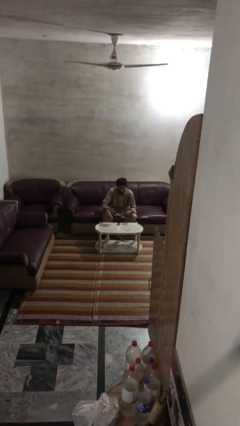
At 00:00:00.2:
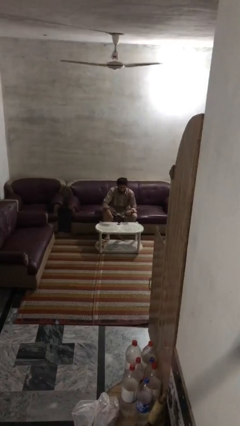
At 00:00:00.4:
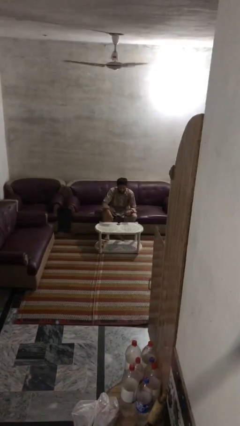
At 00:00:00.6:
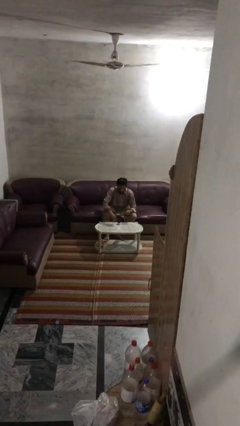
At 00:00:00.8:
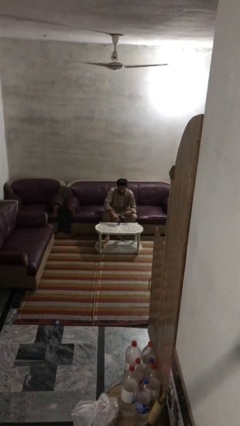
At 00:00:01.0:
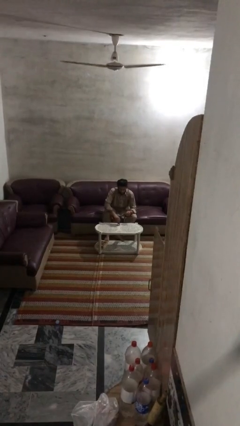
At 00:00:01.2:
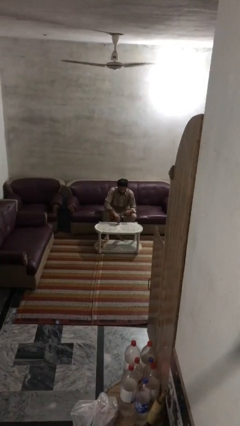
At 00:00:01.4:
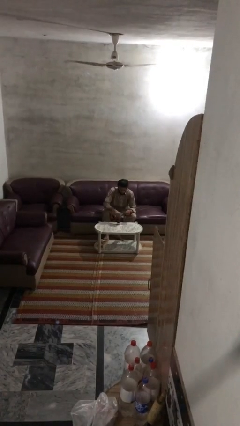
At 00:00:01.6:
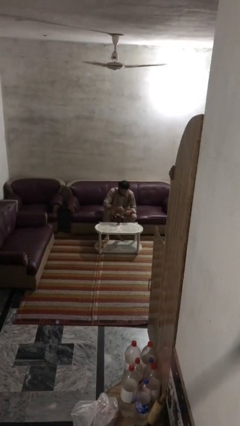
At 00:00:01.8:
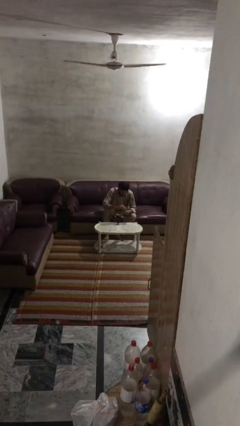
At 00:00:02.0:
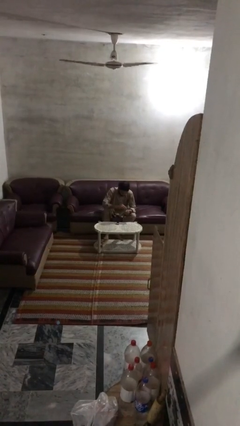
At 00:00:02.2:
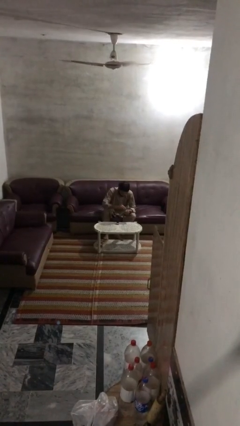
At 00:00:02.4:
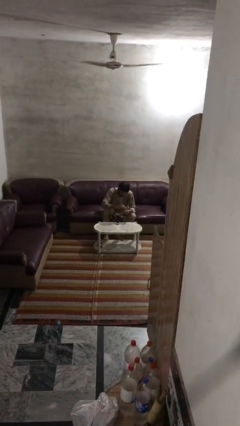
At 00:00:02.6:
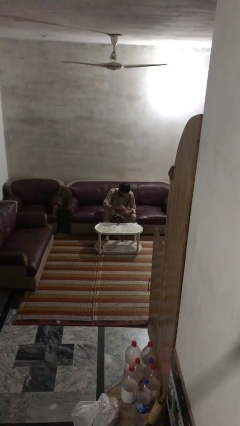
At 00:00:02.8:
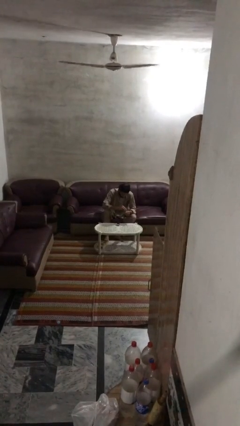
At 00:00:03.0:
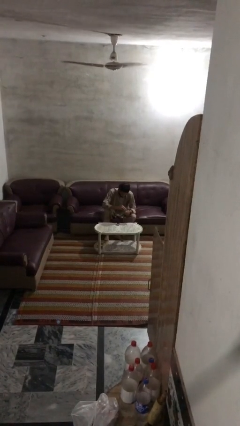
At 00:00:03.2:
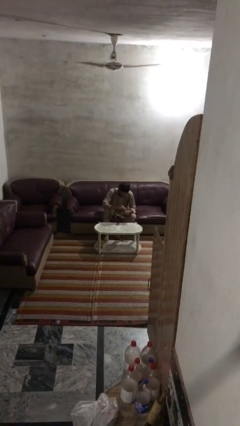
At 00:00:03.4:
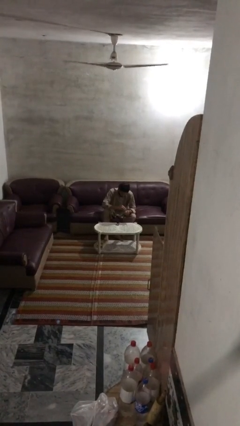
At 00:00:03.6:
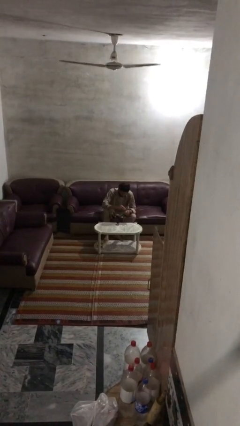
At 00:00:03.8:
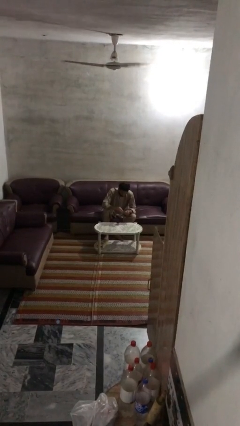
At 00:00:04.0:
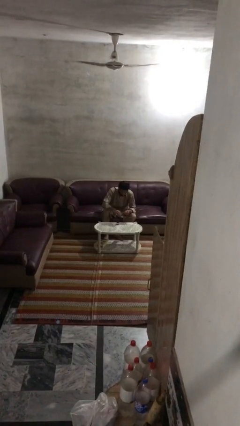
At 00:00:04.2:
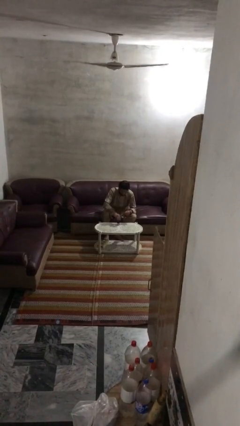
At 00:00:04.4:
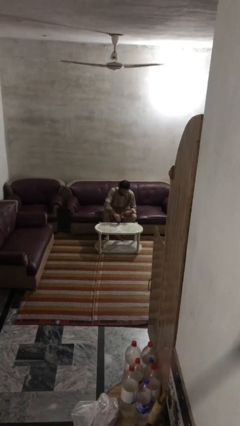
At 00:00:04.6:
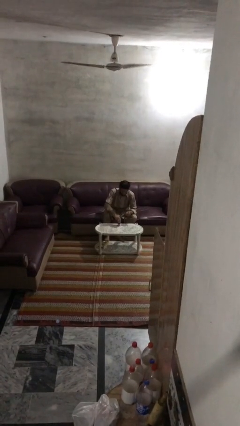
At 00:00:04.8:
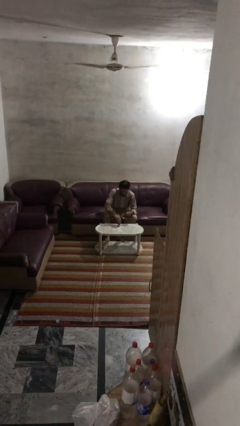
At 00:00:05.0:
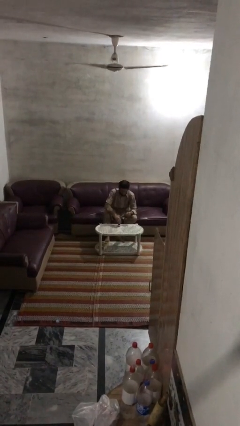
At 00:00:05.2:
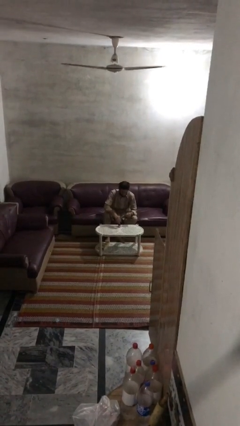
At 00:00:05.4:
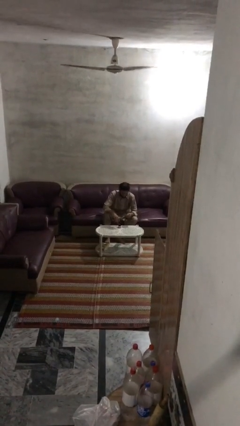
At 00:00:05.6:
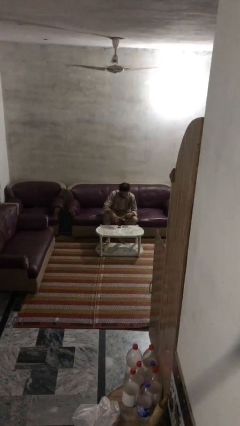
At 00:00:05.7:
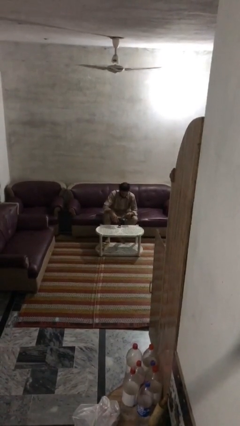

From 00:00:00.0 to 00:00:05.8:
person paints fingernails

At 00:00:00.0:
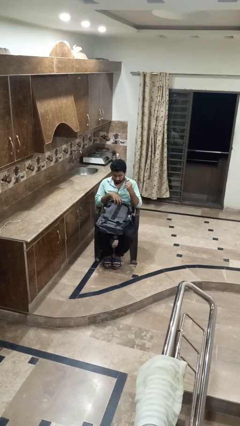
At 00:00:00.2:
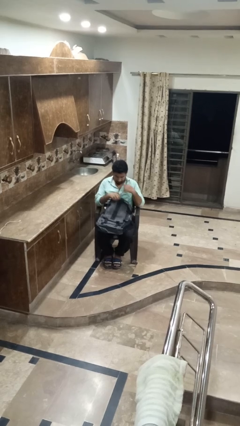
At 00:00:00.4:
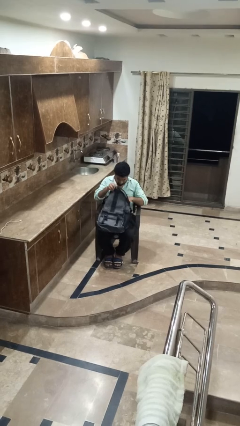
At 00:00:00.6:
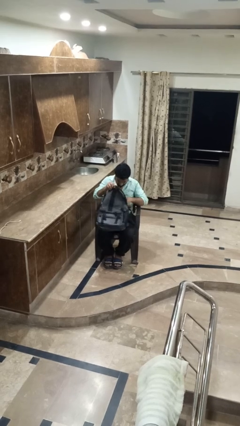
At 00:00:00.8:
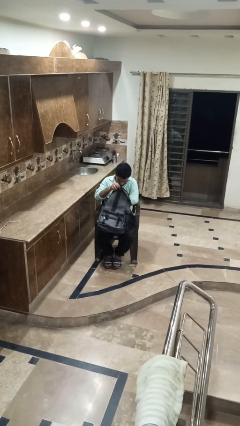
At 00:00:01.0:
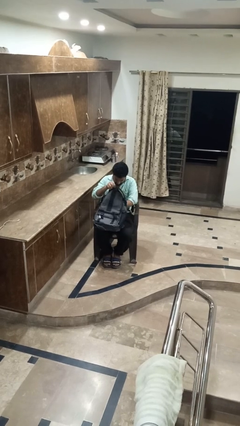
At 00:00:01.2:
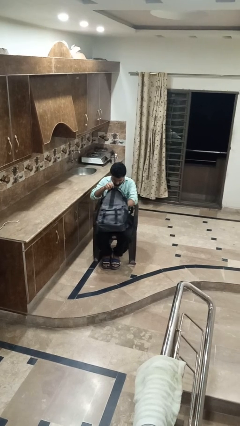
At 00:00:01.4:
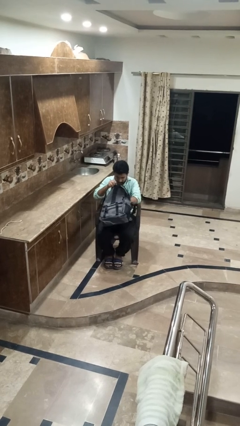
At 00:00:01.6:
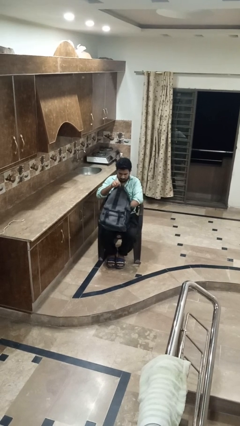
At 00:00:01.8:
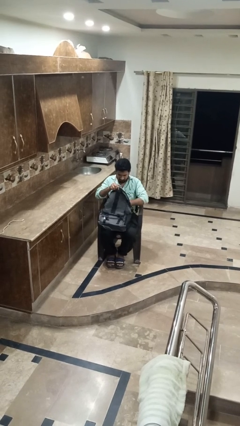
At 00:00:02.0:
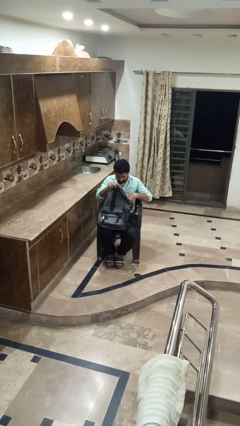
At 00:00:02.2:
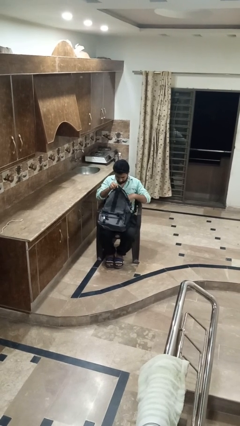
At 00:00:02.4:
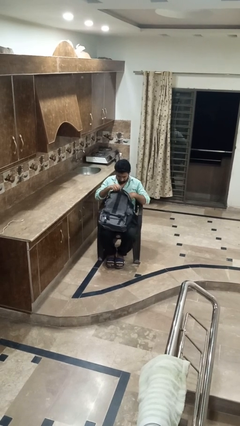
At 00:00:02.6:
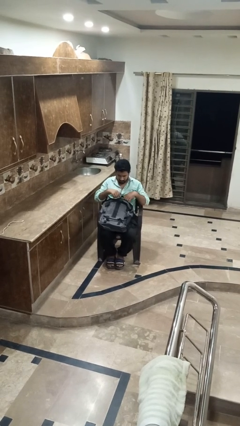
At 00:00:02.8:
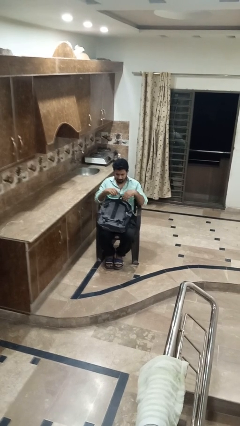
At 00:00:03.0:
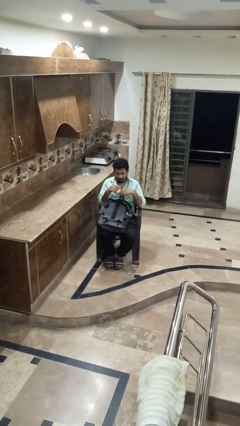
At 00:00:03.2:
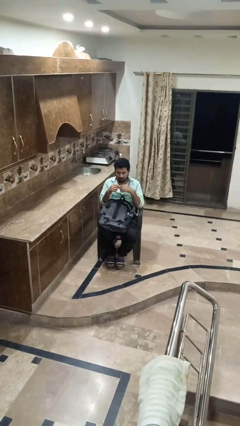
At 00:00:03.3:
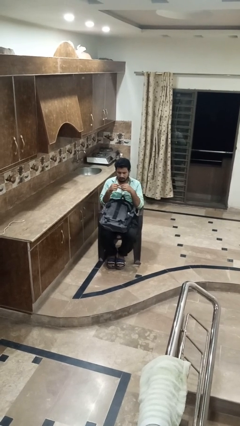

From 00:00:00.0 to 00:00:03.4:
person searches in bag

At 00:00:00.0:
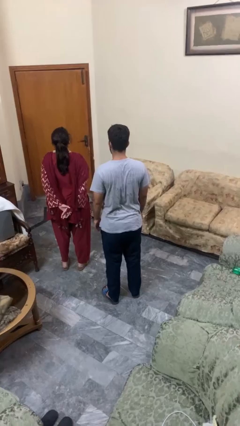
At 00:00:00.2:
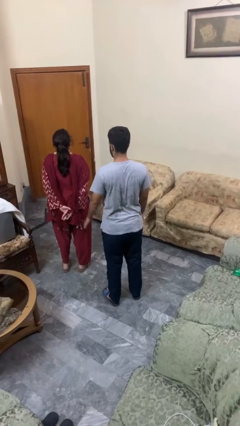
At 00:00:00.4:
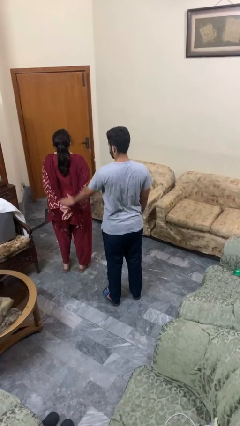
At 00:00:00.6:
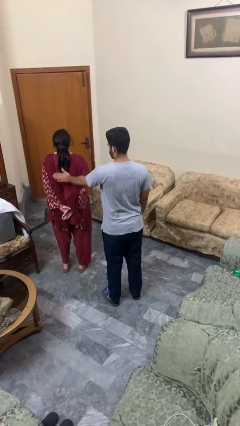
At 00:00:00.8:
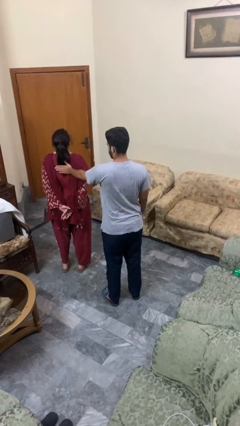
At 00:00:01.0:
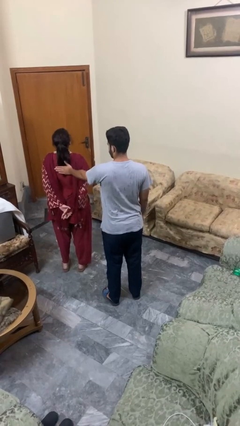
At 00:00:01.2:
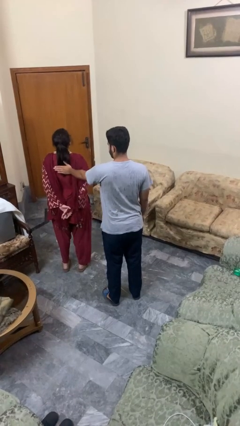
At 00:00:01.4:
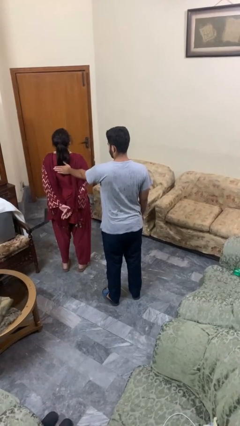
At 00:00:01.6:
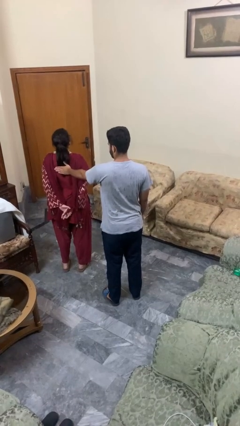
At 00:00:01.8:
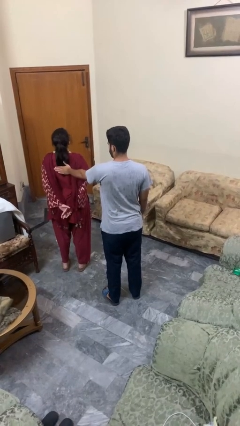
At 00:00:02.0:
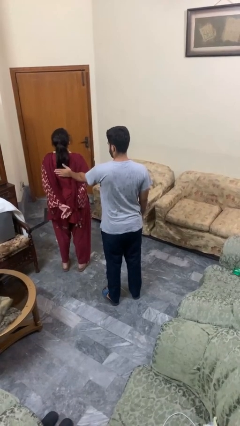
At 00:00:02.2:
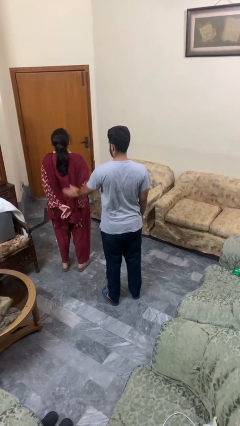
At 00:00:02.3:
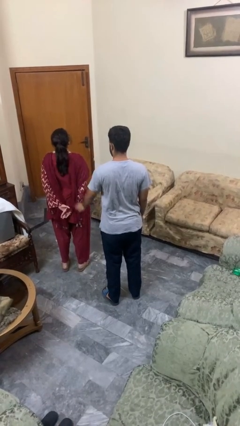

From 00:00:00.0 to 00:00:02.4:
person touches back of person

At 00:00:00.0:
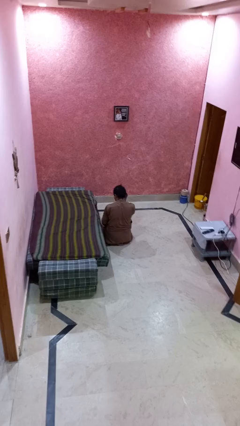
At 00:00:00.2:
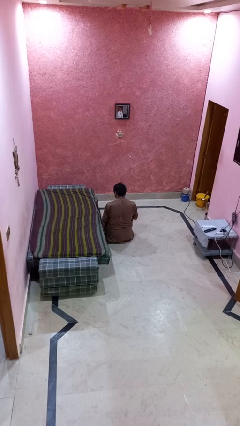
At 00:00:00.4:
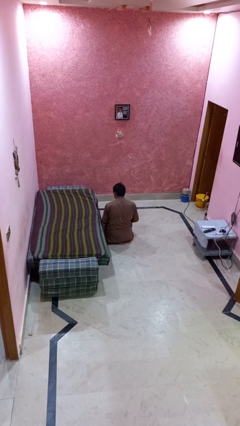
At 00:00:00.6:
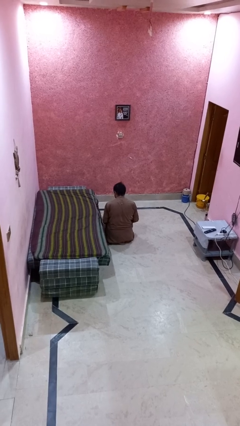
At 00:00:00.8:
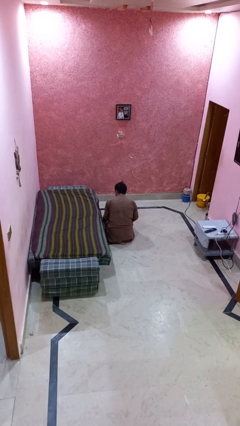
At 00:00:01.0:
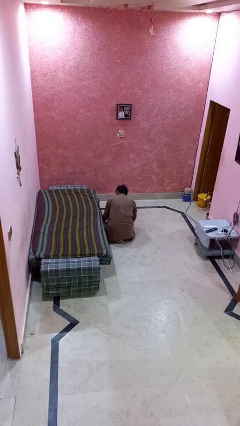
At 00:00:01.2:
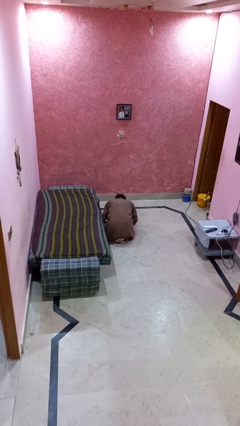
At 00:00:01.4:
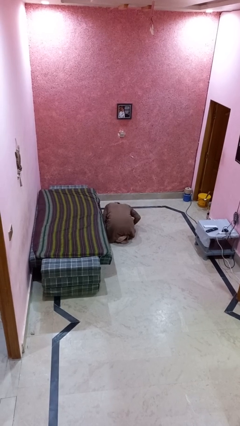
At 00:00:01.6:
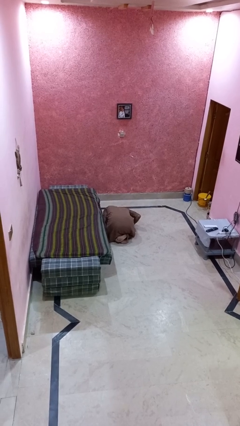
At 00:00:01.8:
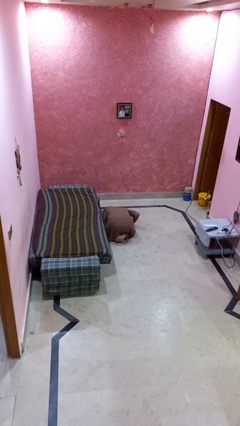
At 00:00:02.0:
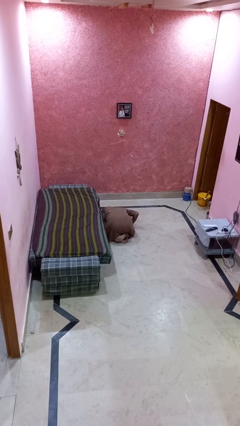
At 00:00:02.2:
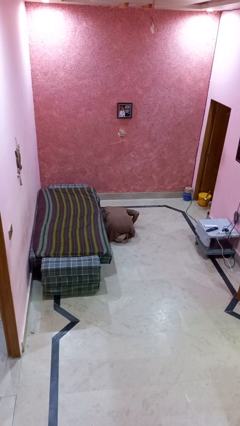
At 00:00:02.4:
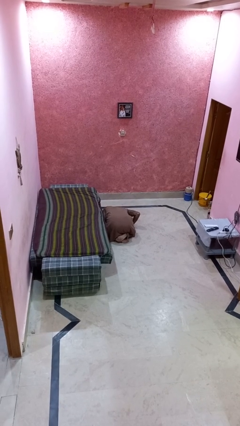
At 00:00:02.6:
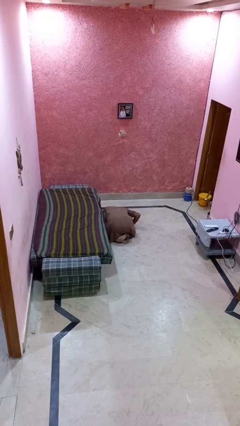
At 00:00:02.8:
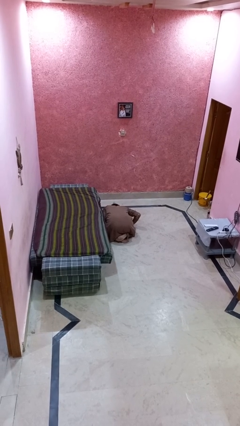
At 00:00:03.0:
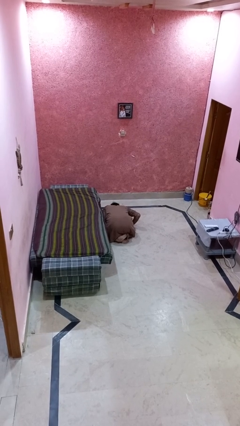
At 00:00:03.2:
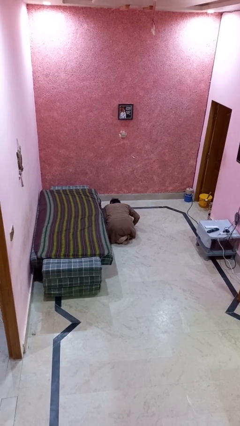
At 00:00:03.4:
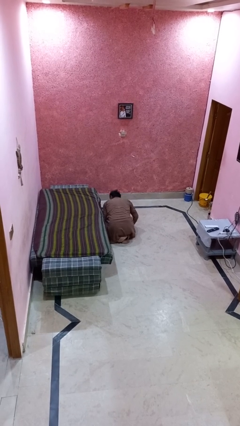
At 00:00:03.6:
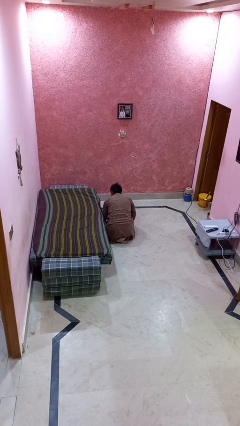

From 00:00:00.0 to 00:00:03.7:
person searches under bed

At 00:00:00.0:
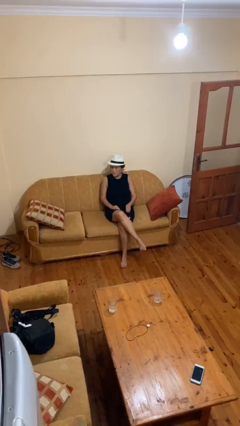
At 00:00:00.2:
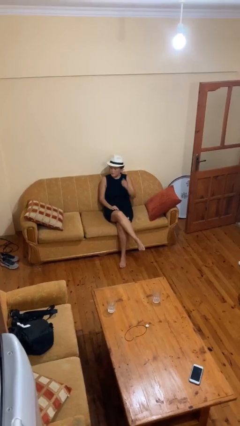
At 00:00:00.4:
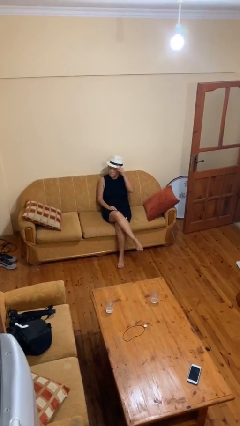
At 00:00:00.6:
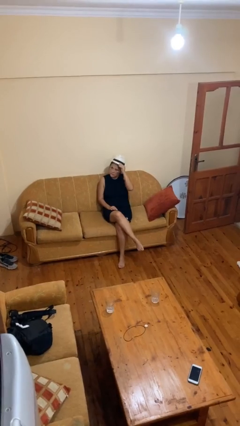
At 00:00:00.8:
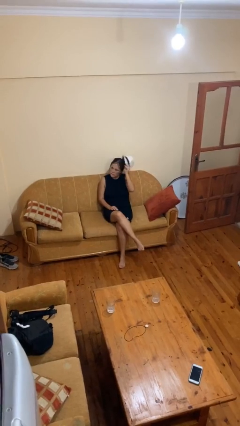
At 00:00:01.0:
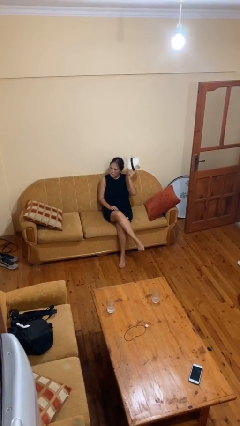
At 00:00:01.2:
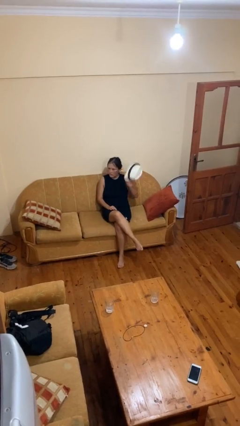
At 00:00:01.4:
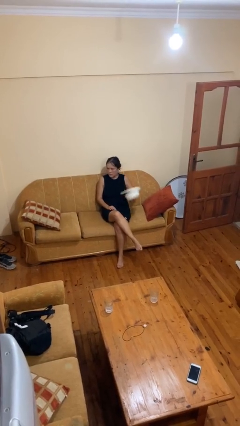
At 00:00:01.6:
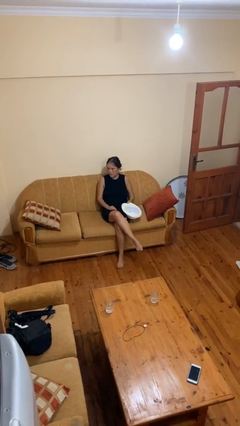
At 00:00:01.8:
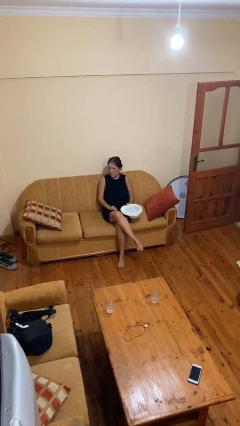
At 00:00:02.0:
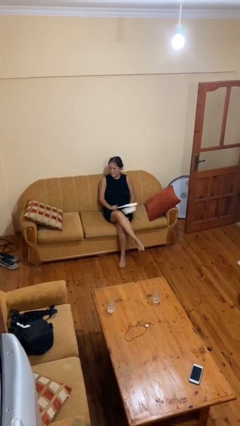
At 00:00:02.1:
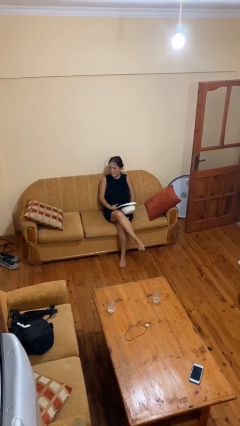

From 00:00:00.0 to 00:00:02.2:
person takes off hat
